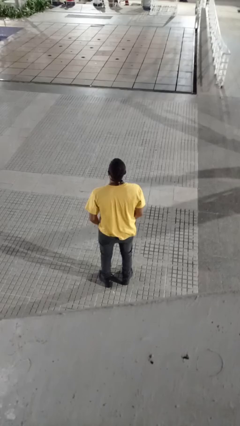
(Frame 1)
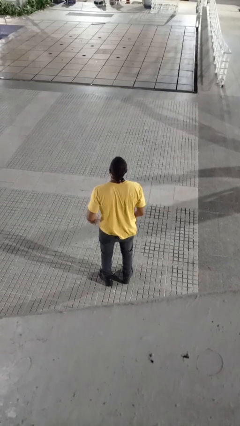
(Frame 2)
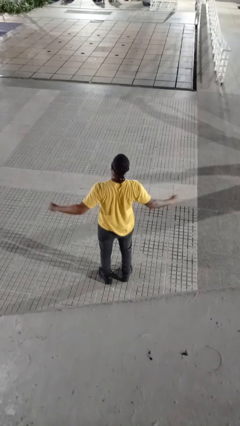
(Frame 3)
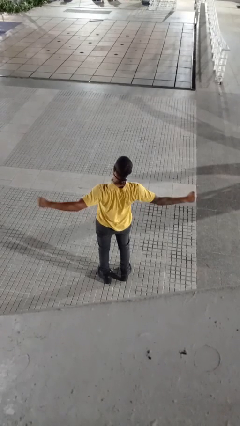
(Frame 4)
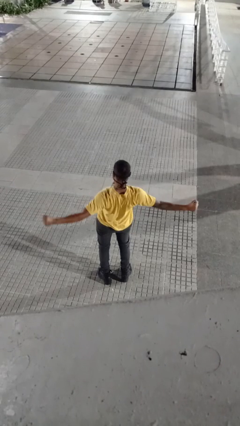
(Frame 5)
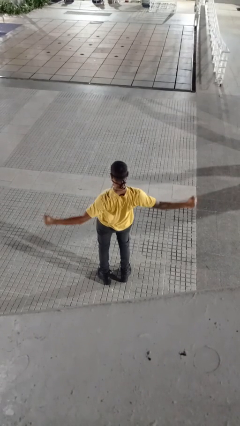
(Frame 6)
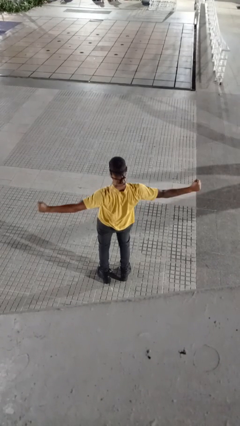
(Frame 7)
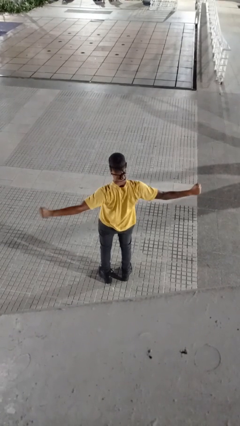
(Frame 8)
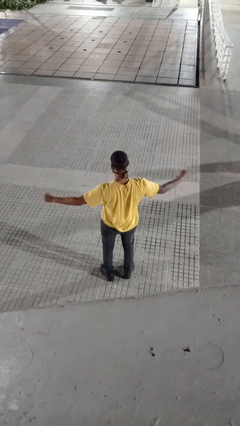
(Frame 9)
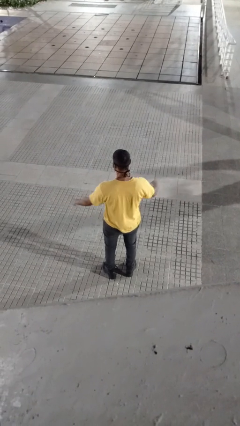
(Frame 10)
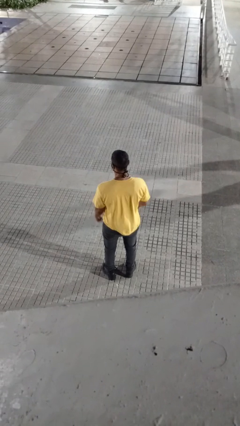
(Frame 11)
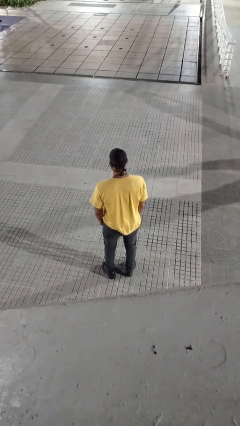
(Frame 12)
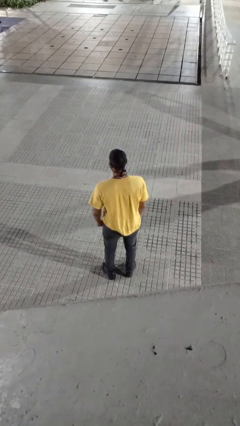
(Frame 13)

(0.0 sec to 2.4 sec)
person stretches arms to side

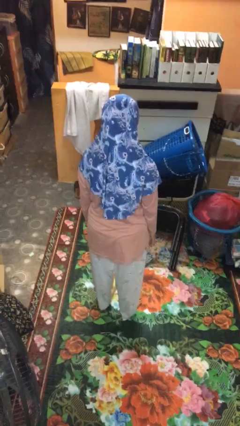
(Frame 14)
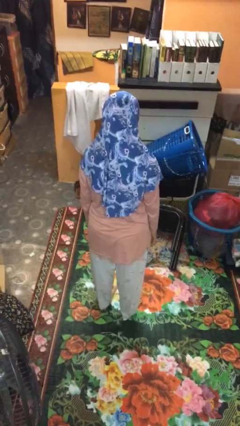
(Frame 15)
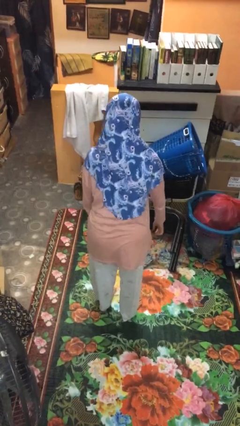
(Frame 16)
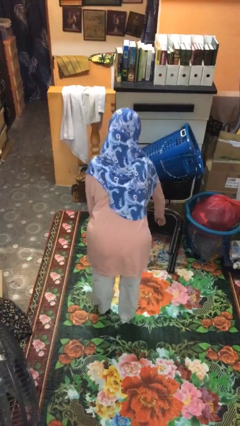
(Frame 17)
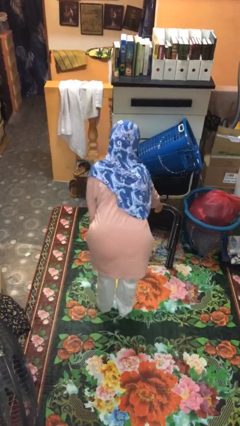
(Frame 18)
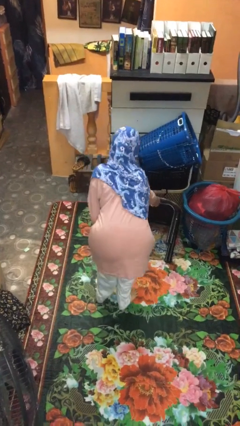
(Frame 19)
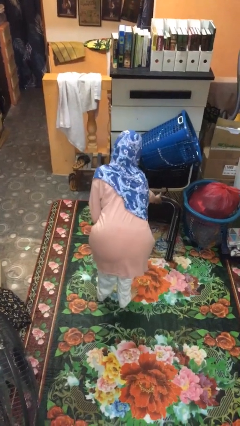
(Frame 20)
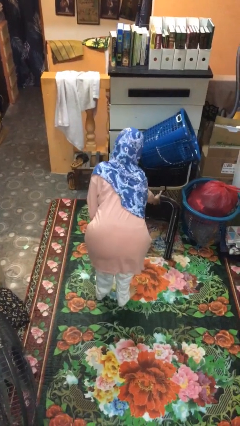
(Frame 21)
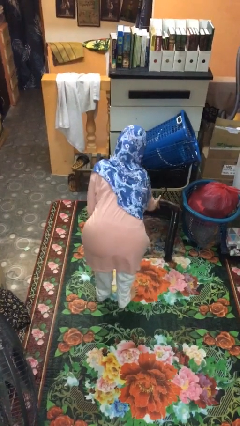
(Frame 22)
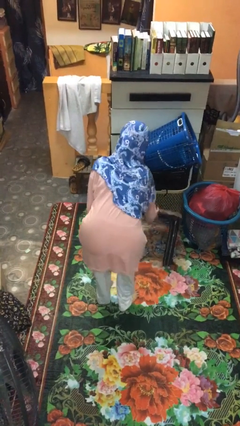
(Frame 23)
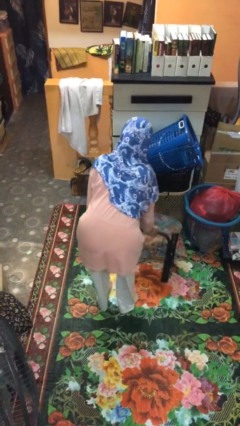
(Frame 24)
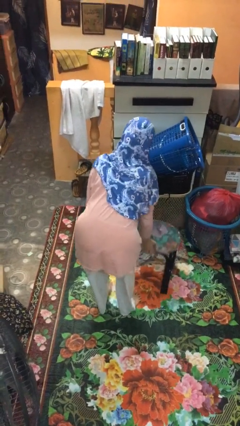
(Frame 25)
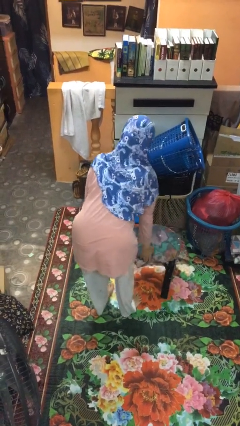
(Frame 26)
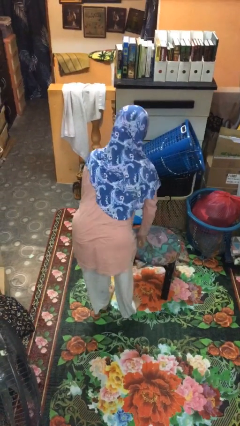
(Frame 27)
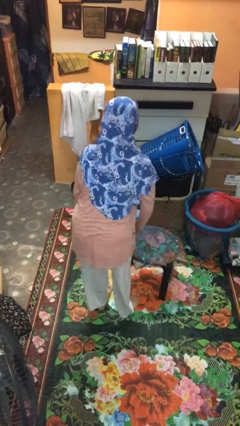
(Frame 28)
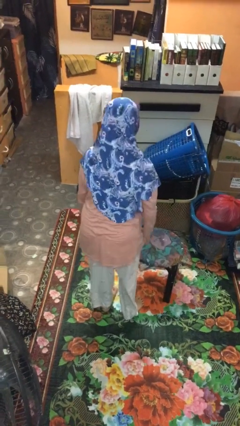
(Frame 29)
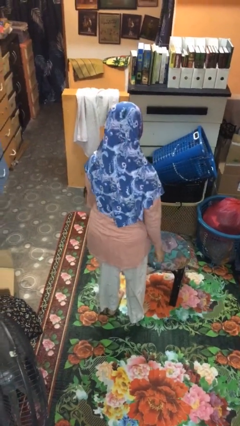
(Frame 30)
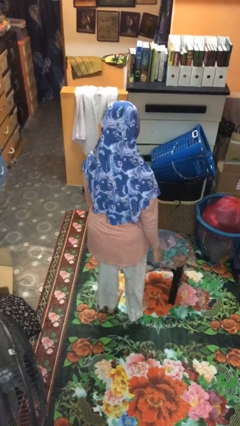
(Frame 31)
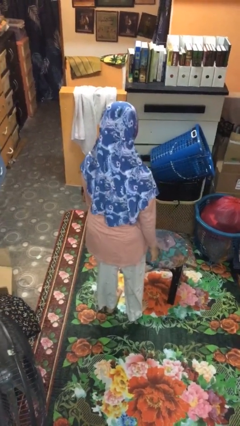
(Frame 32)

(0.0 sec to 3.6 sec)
person sets upright furniture

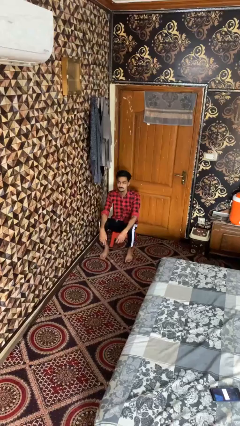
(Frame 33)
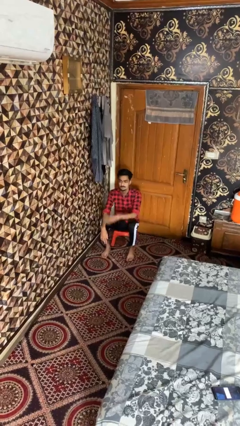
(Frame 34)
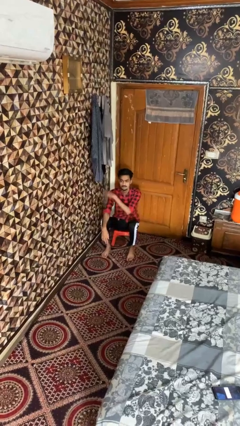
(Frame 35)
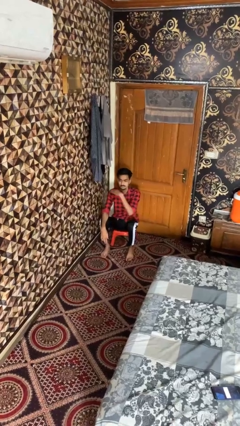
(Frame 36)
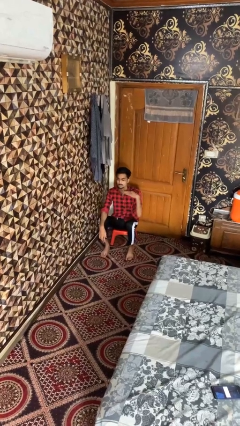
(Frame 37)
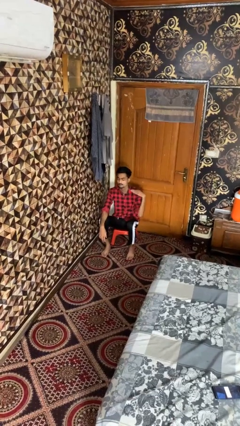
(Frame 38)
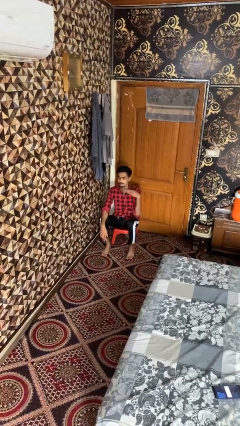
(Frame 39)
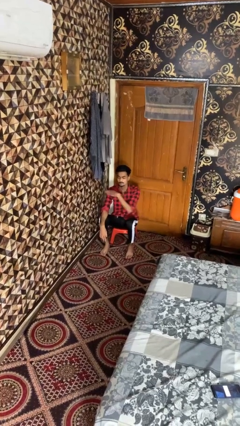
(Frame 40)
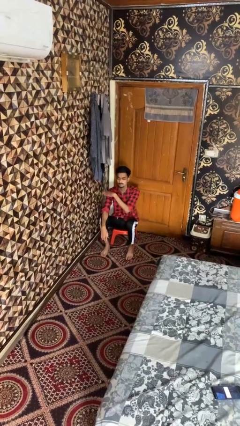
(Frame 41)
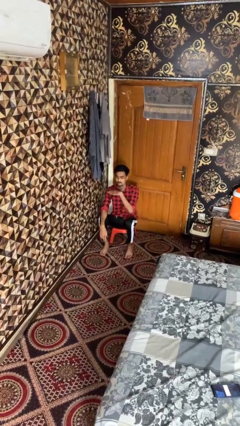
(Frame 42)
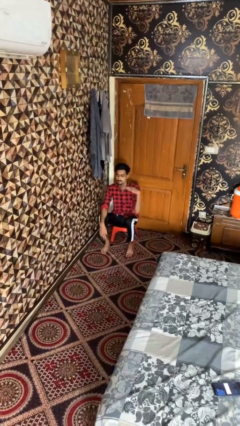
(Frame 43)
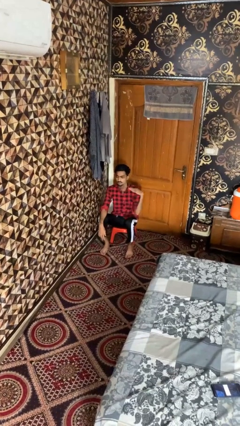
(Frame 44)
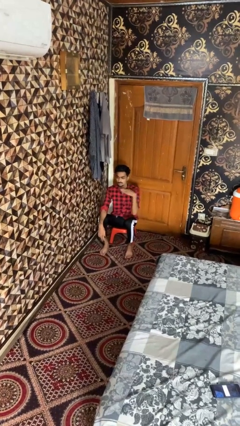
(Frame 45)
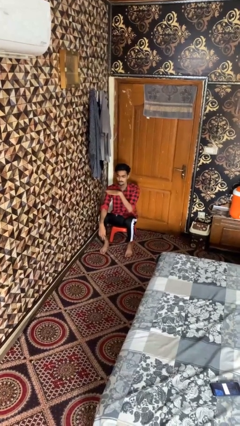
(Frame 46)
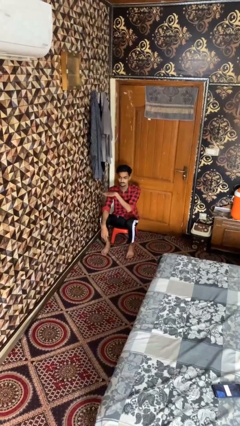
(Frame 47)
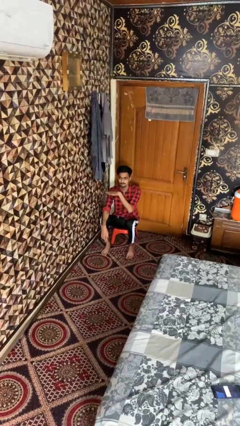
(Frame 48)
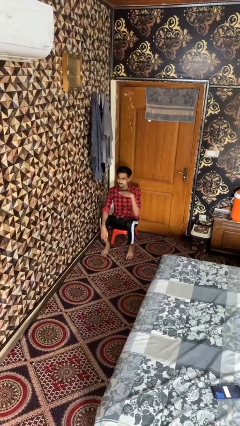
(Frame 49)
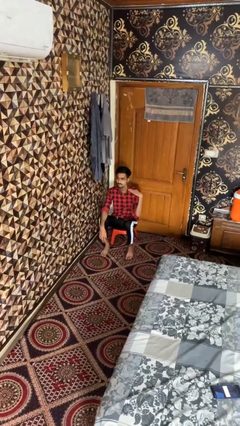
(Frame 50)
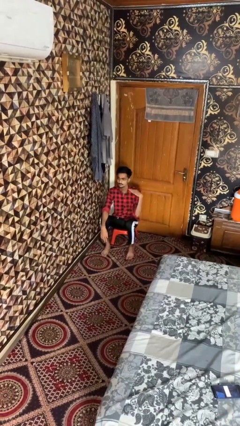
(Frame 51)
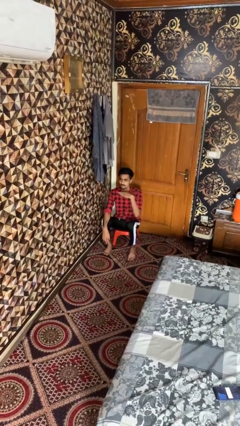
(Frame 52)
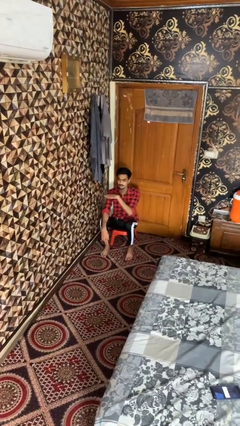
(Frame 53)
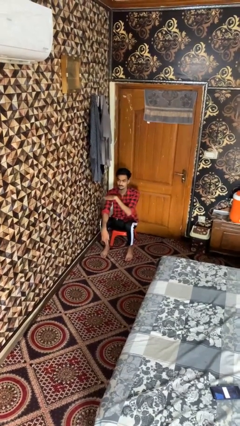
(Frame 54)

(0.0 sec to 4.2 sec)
person gestures cut

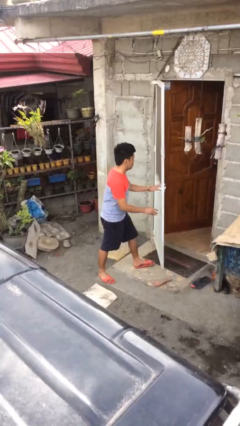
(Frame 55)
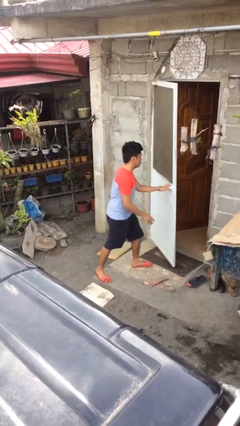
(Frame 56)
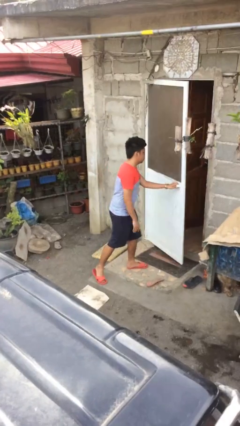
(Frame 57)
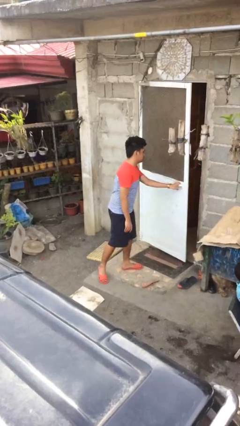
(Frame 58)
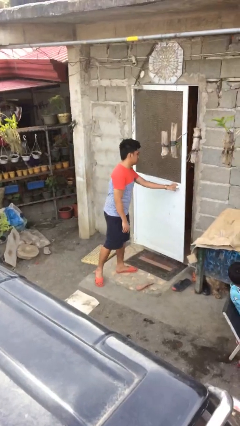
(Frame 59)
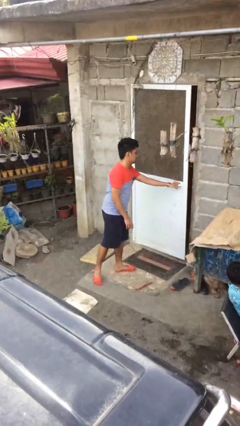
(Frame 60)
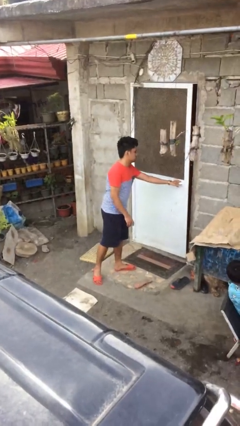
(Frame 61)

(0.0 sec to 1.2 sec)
person closes facility door

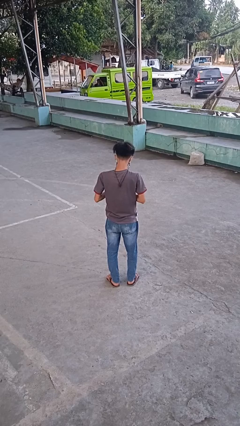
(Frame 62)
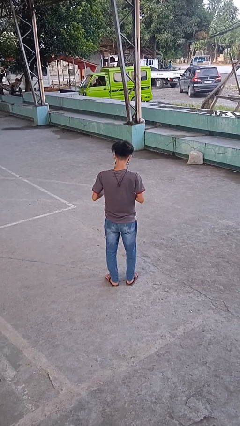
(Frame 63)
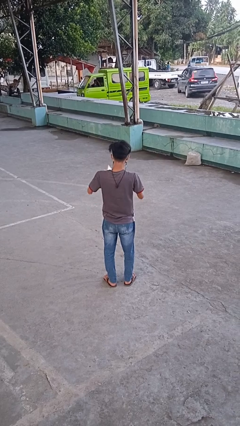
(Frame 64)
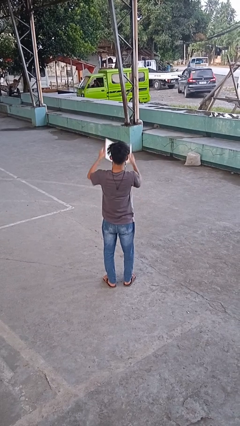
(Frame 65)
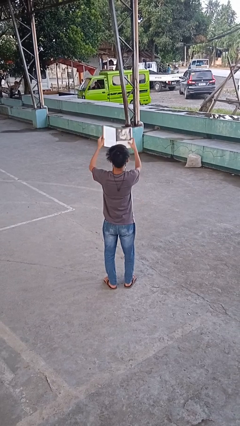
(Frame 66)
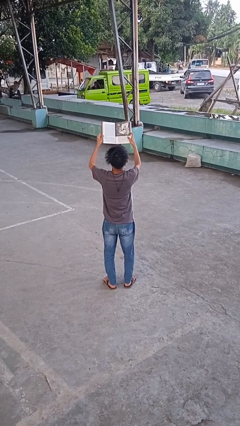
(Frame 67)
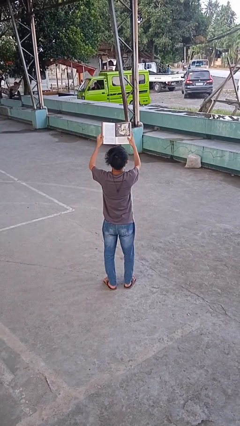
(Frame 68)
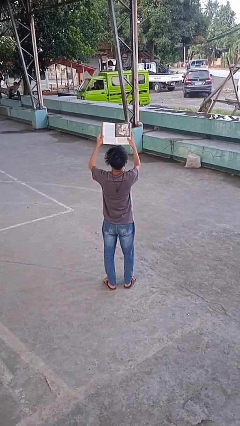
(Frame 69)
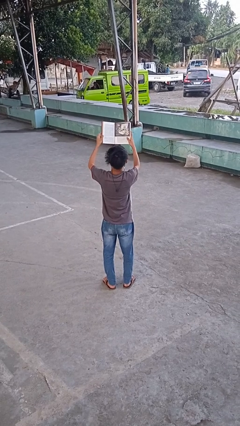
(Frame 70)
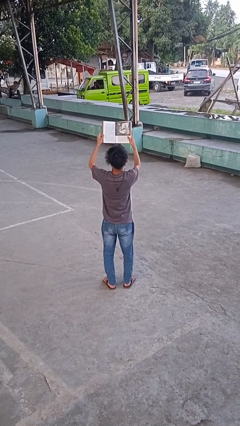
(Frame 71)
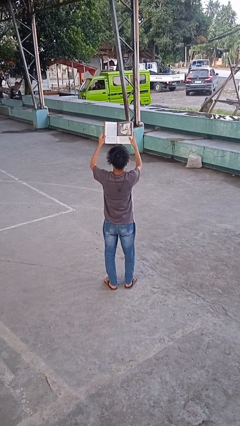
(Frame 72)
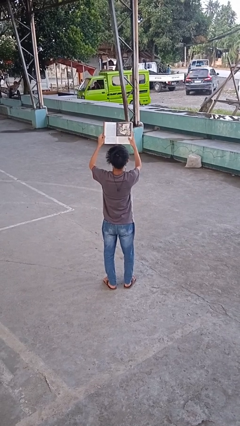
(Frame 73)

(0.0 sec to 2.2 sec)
person reads book

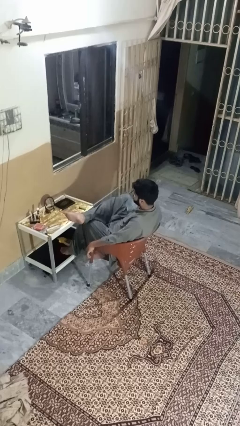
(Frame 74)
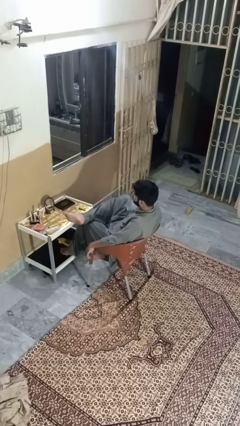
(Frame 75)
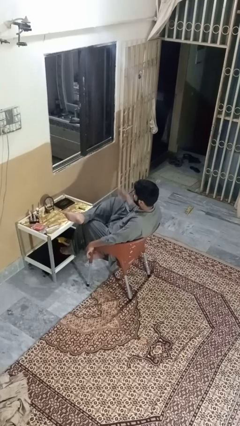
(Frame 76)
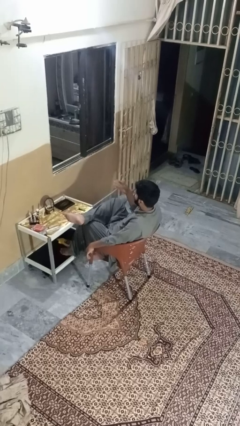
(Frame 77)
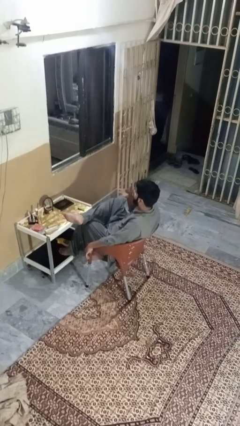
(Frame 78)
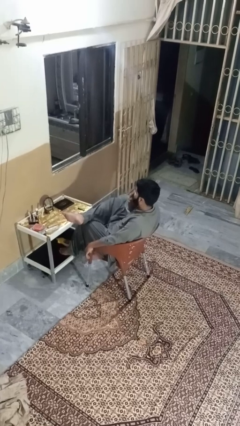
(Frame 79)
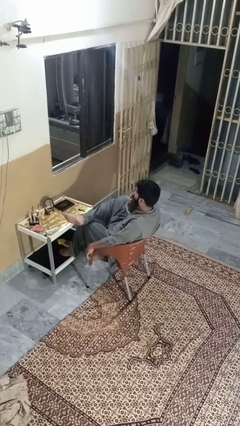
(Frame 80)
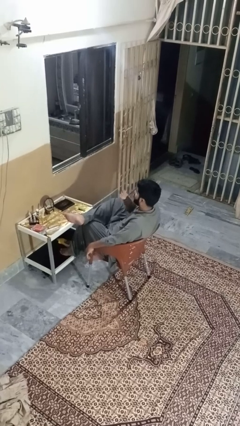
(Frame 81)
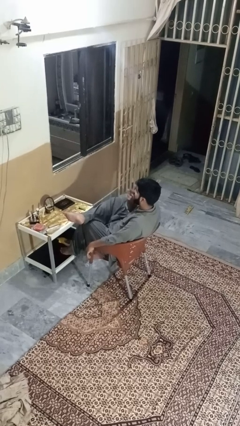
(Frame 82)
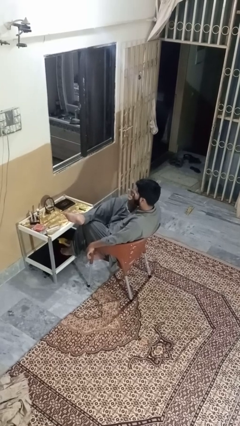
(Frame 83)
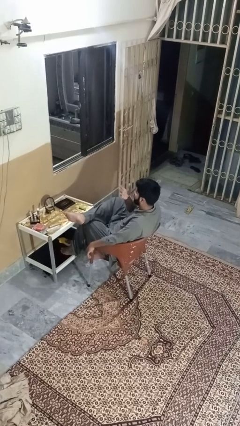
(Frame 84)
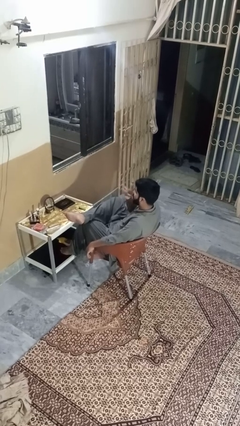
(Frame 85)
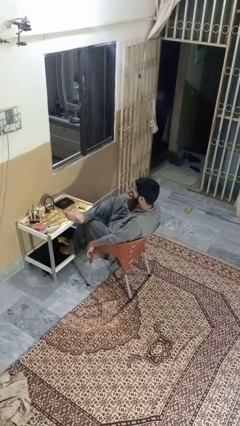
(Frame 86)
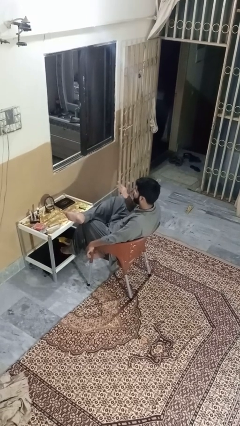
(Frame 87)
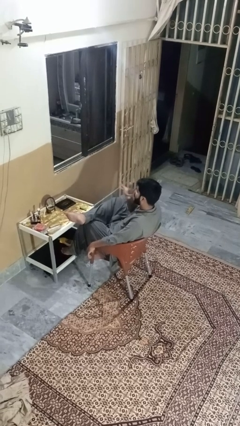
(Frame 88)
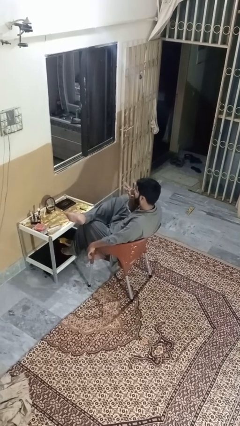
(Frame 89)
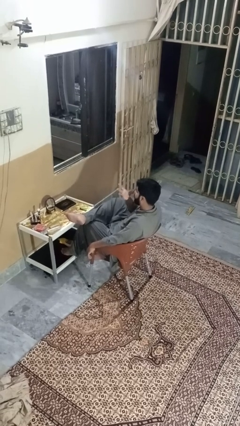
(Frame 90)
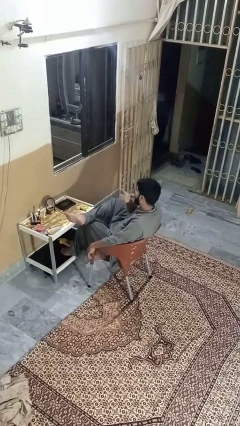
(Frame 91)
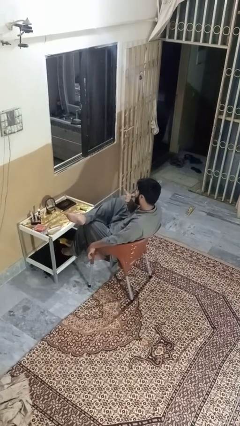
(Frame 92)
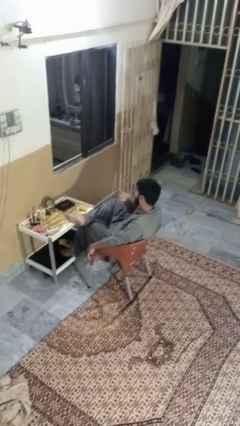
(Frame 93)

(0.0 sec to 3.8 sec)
person licks fingers
